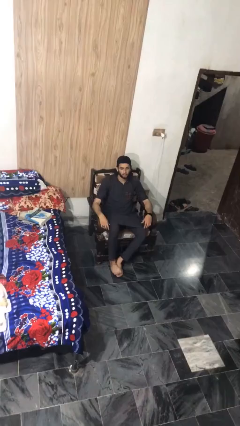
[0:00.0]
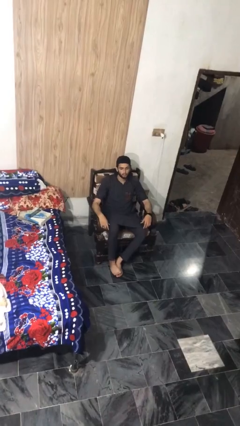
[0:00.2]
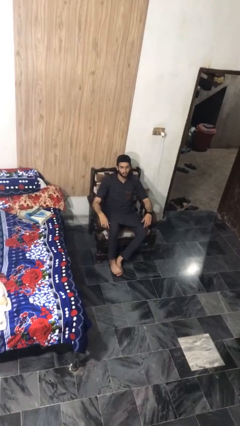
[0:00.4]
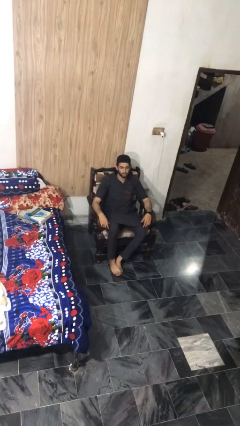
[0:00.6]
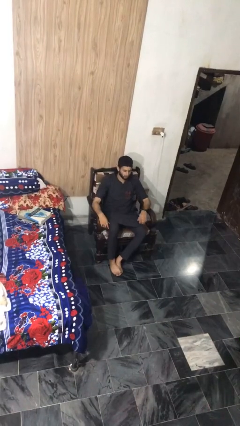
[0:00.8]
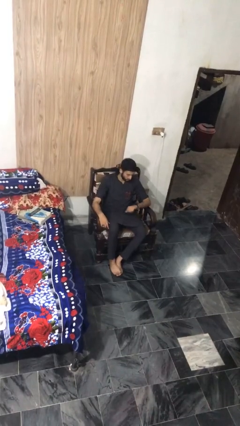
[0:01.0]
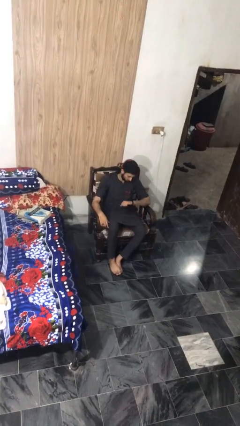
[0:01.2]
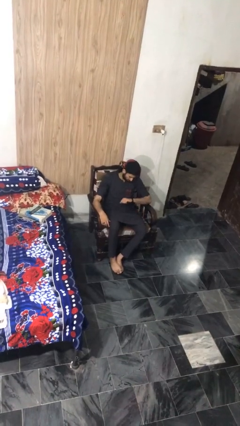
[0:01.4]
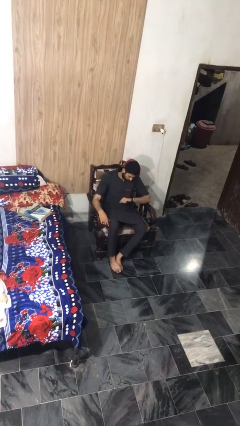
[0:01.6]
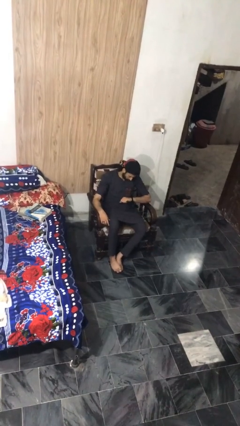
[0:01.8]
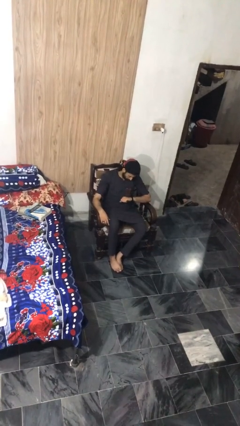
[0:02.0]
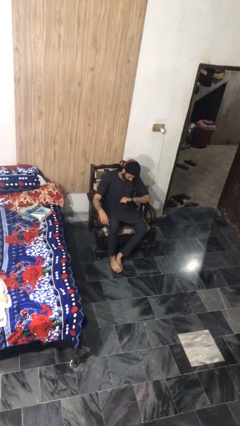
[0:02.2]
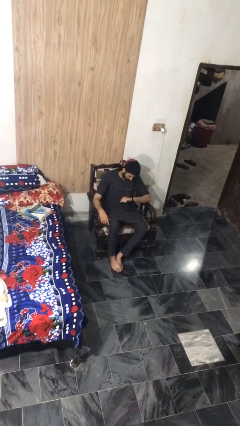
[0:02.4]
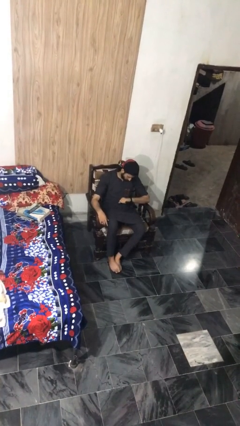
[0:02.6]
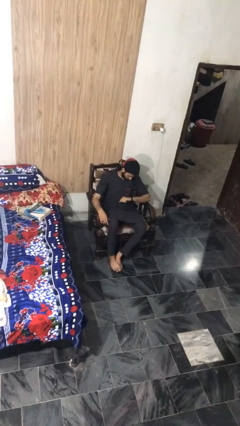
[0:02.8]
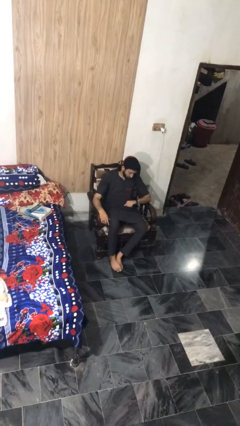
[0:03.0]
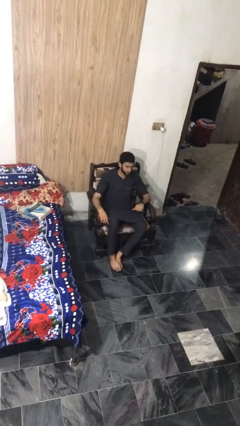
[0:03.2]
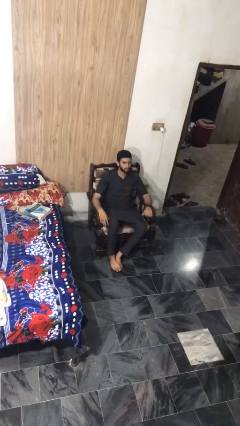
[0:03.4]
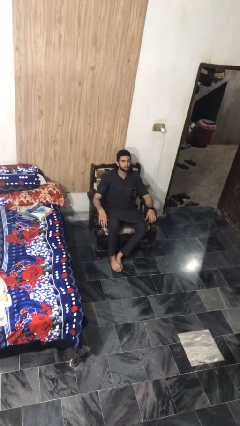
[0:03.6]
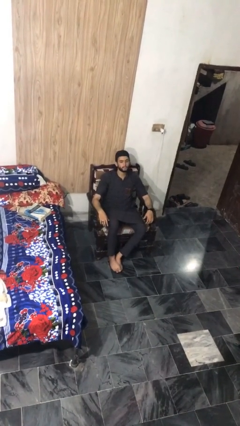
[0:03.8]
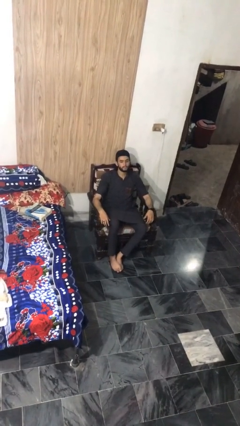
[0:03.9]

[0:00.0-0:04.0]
person looks at wristwatch

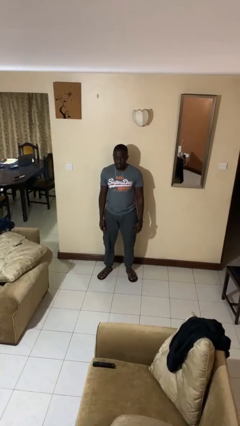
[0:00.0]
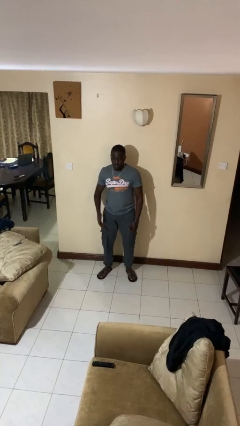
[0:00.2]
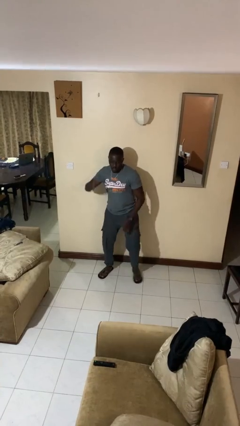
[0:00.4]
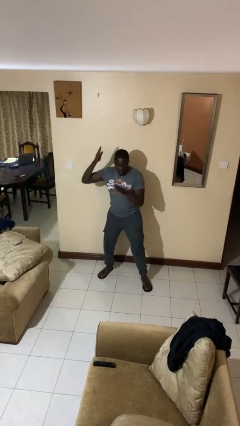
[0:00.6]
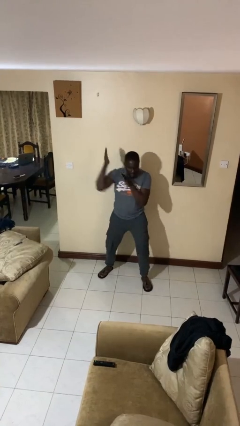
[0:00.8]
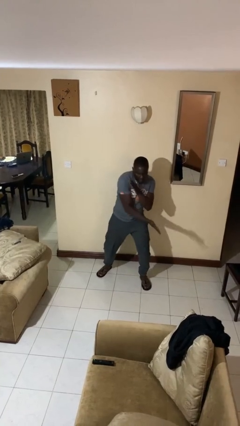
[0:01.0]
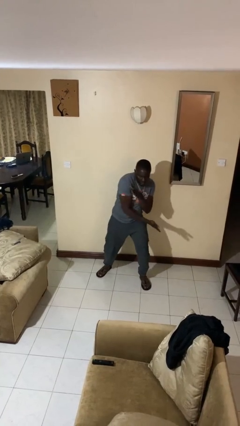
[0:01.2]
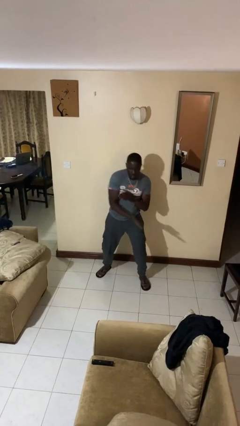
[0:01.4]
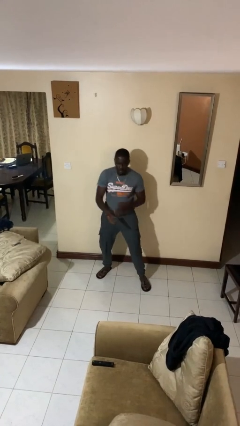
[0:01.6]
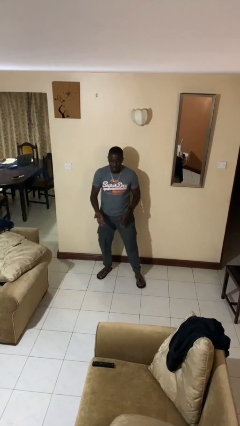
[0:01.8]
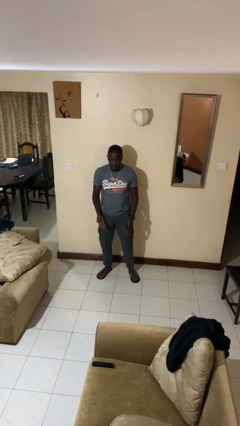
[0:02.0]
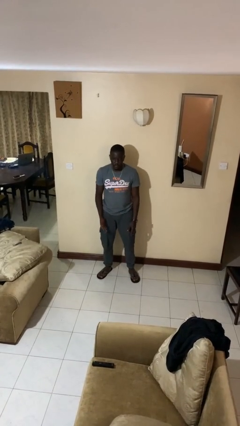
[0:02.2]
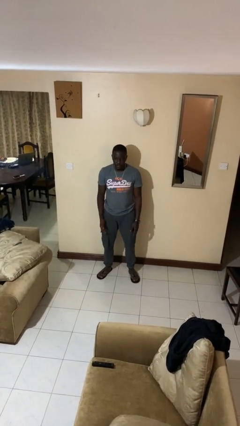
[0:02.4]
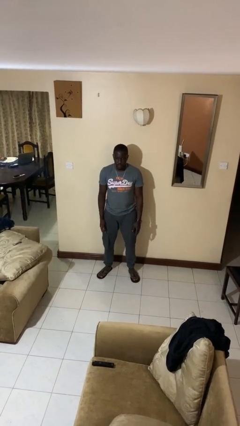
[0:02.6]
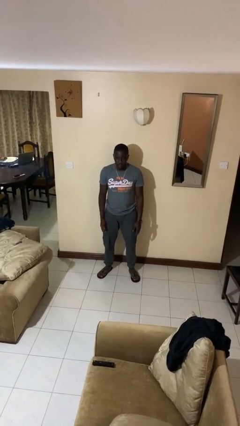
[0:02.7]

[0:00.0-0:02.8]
person karate chop

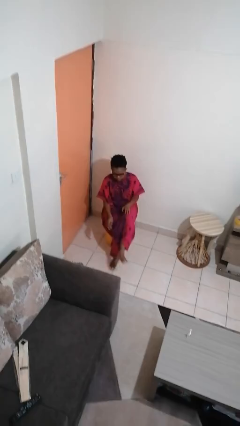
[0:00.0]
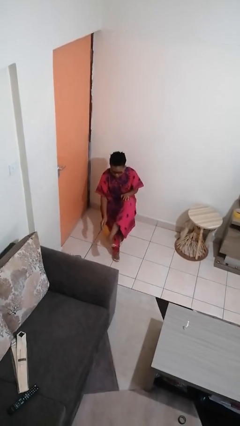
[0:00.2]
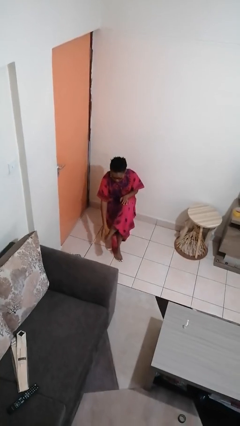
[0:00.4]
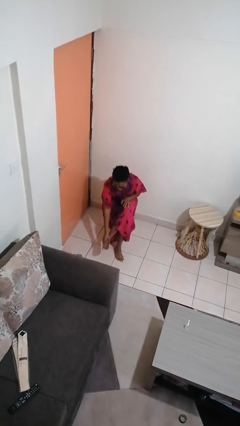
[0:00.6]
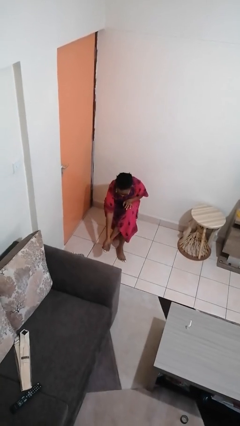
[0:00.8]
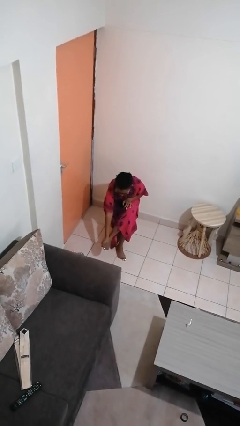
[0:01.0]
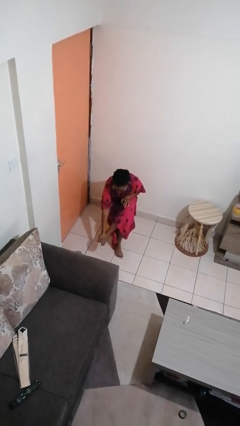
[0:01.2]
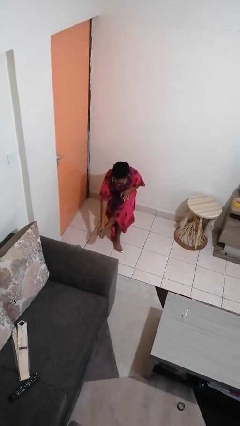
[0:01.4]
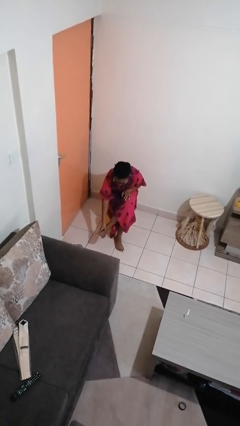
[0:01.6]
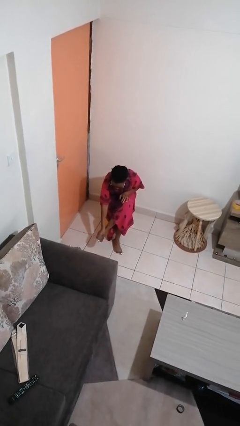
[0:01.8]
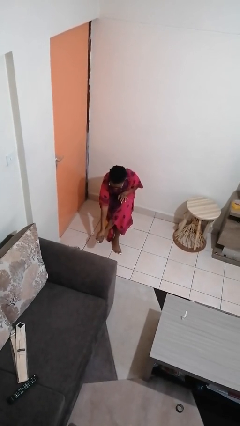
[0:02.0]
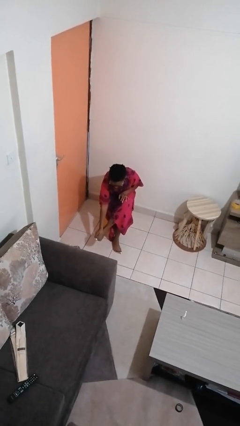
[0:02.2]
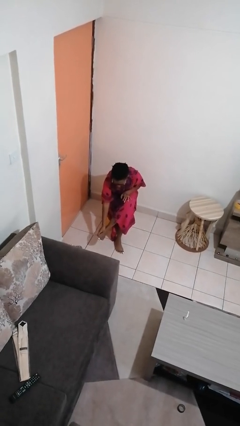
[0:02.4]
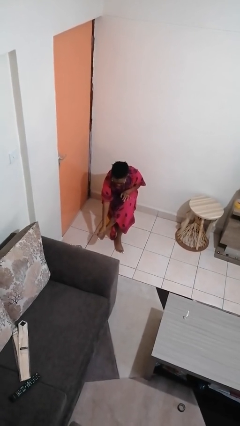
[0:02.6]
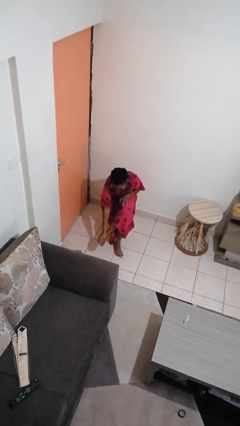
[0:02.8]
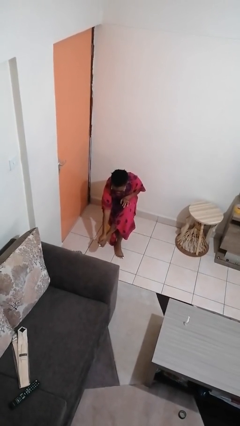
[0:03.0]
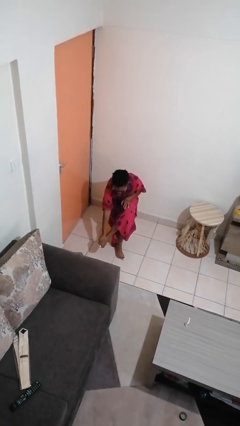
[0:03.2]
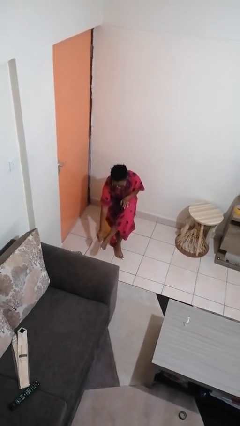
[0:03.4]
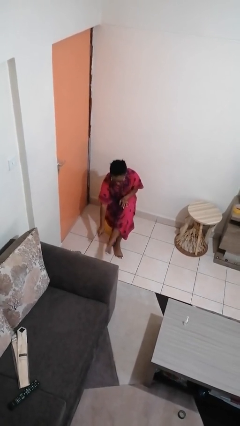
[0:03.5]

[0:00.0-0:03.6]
person rubs foot

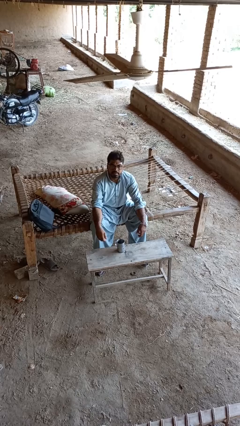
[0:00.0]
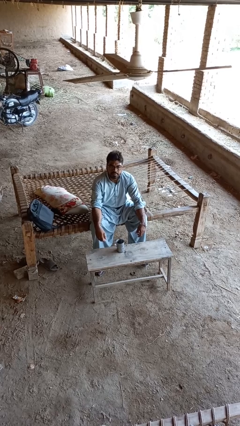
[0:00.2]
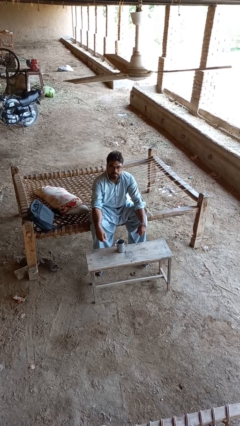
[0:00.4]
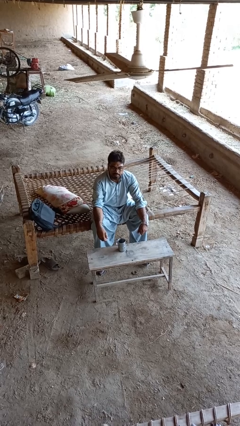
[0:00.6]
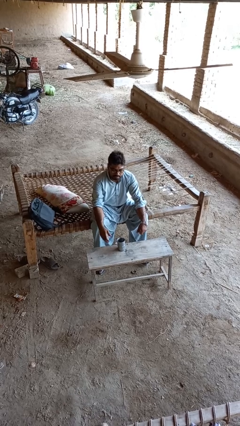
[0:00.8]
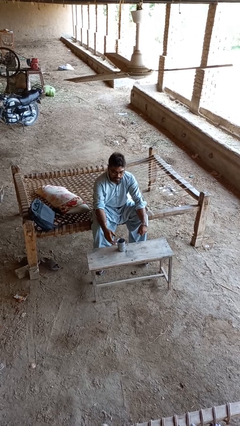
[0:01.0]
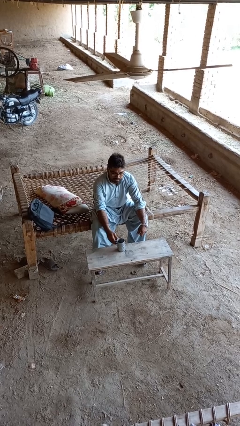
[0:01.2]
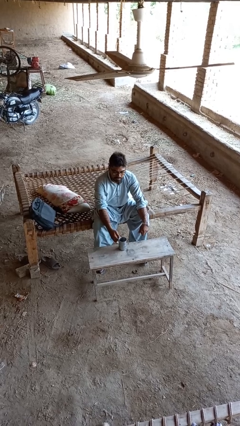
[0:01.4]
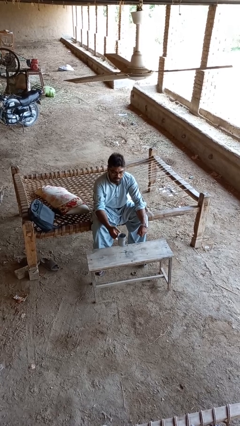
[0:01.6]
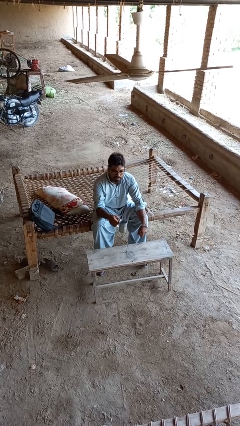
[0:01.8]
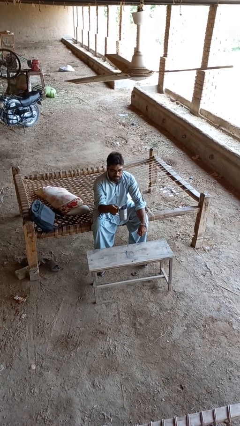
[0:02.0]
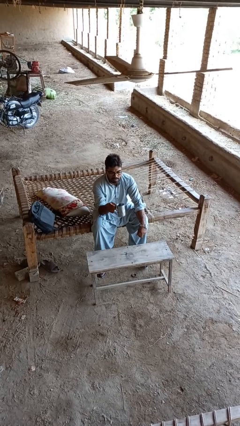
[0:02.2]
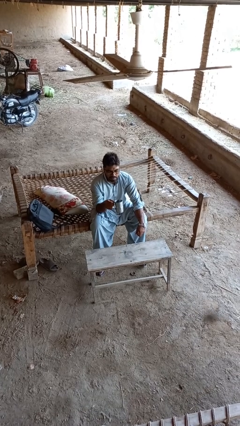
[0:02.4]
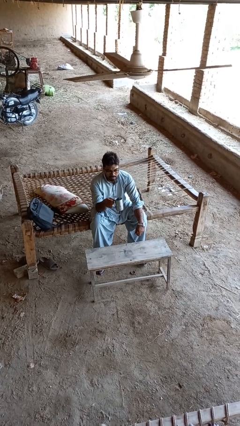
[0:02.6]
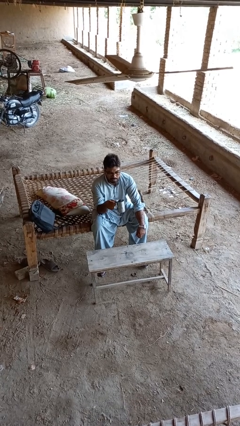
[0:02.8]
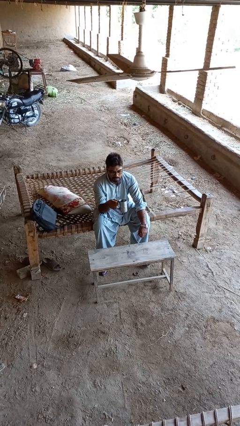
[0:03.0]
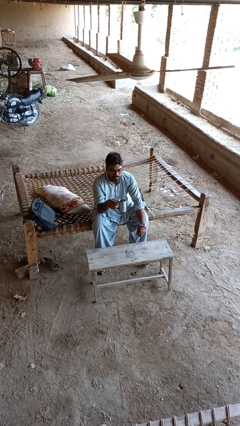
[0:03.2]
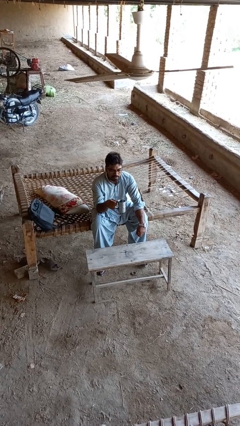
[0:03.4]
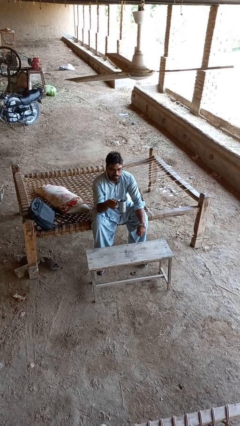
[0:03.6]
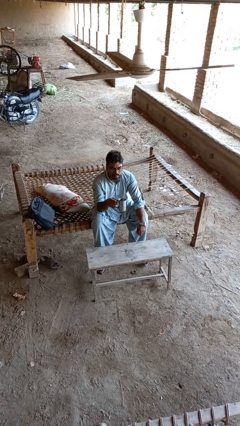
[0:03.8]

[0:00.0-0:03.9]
person picks up object from table

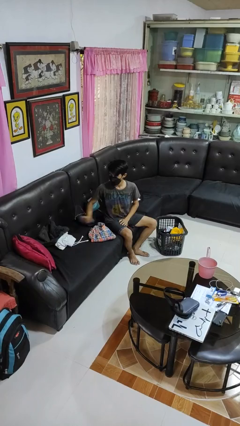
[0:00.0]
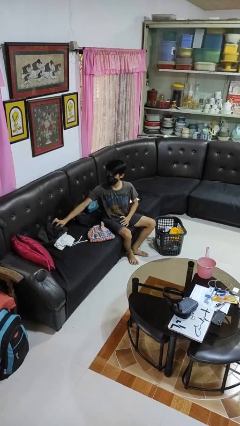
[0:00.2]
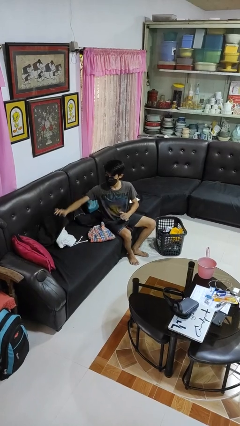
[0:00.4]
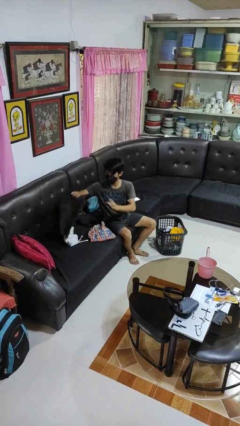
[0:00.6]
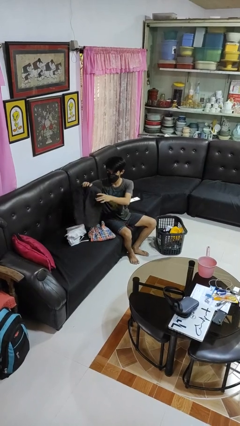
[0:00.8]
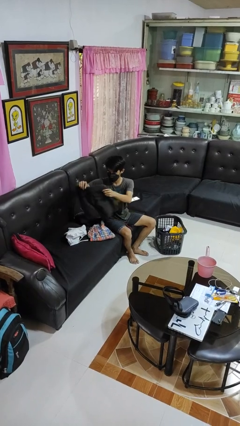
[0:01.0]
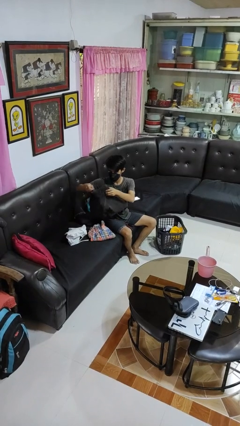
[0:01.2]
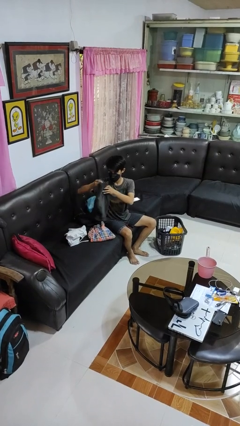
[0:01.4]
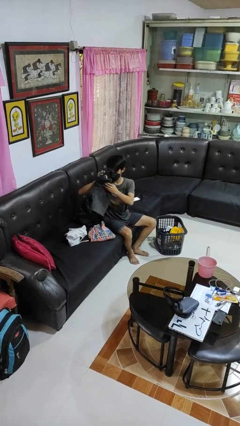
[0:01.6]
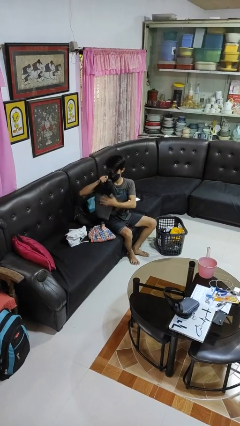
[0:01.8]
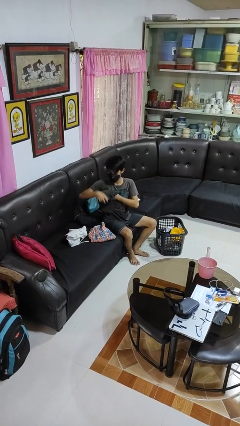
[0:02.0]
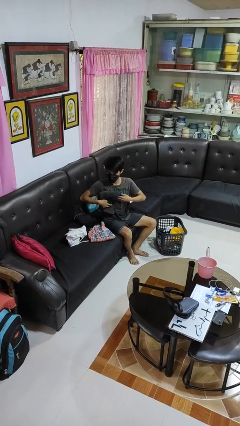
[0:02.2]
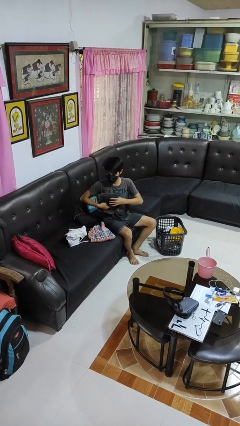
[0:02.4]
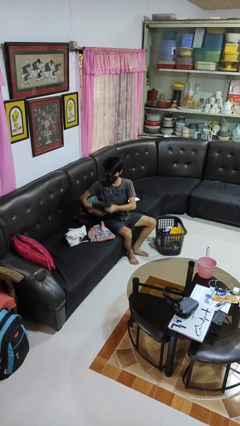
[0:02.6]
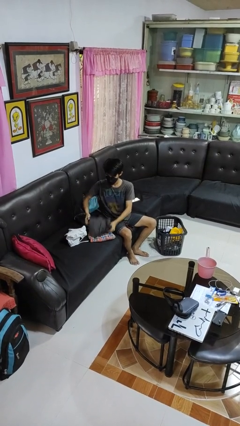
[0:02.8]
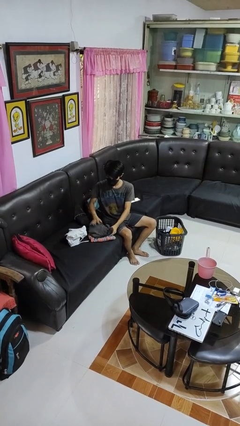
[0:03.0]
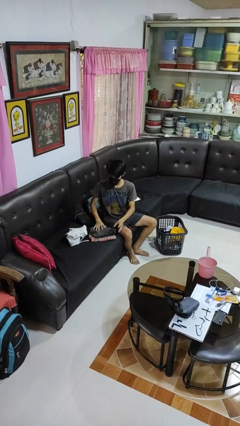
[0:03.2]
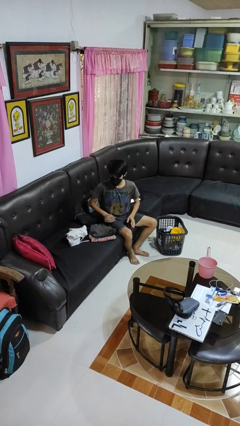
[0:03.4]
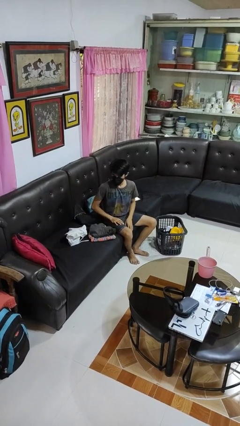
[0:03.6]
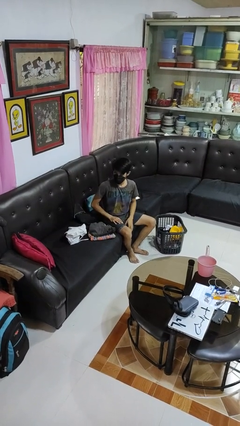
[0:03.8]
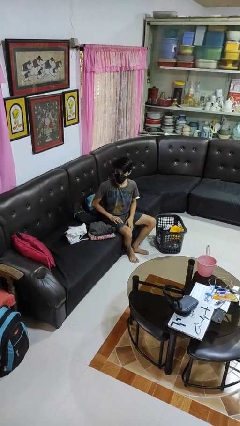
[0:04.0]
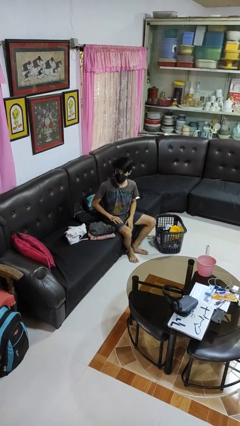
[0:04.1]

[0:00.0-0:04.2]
person folds pants
